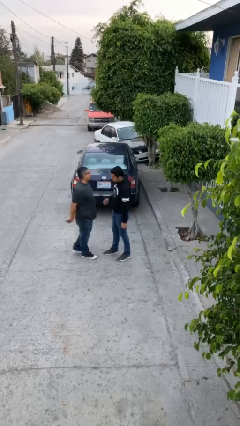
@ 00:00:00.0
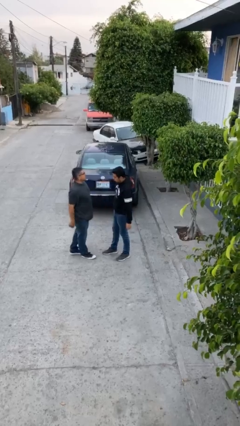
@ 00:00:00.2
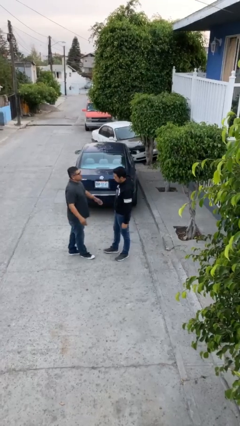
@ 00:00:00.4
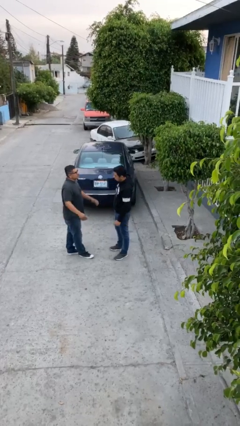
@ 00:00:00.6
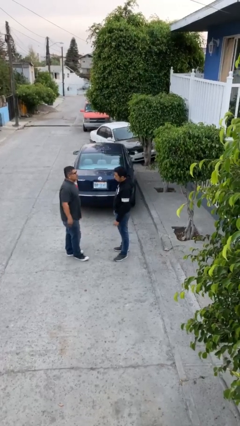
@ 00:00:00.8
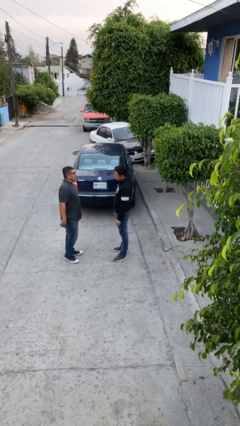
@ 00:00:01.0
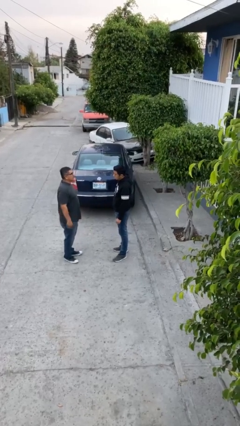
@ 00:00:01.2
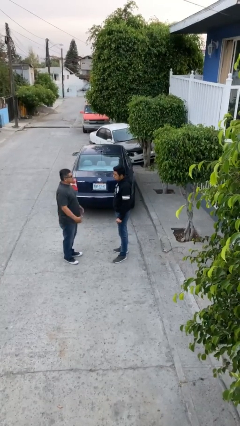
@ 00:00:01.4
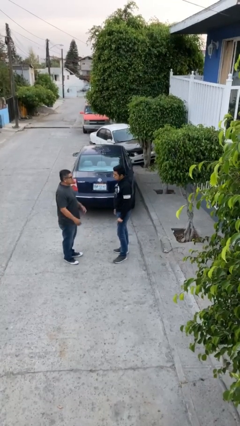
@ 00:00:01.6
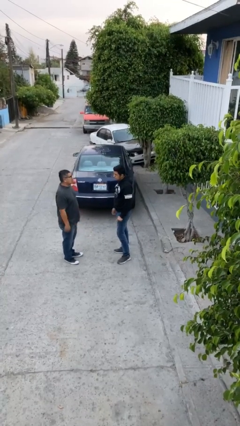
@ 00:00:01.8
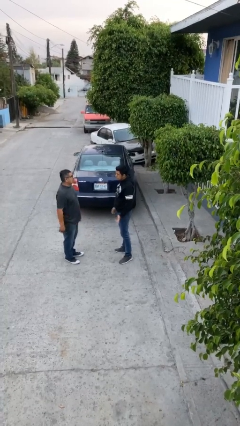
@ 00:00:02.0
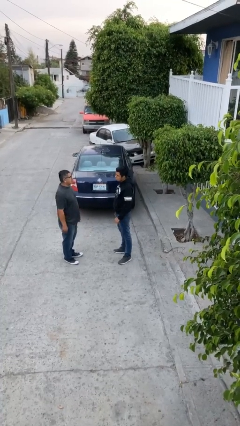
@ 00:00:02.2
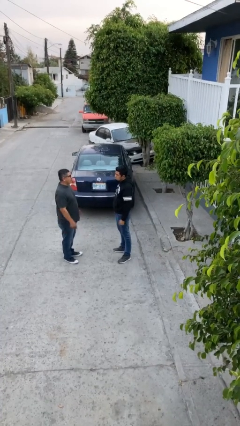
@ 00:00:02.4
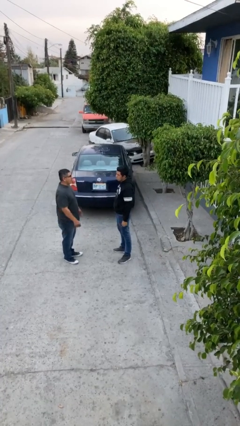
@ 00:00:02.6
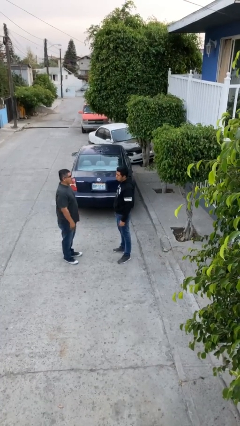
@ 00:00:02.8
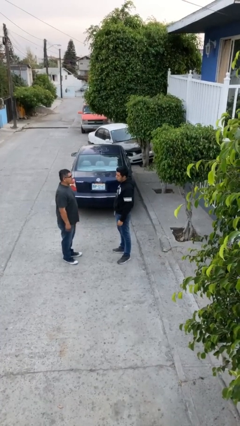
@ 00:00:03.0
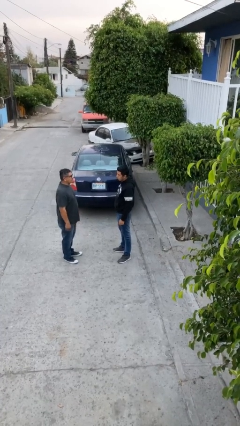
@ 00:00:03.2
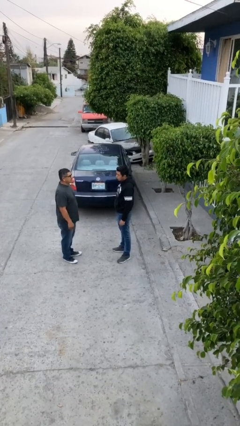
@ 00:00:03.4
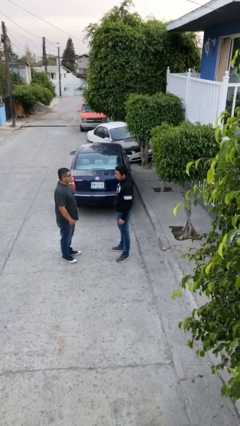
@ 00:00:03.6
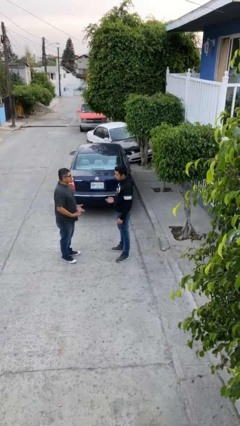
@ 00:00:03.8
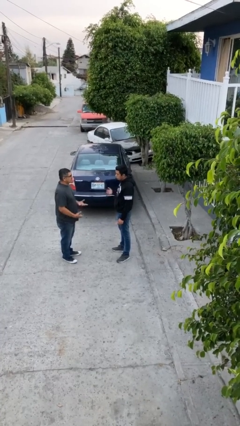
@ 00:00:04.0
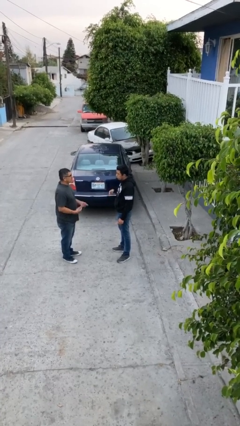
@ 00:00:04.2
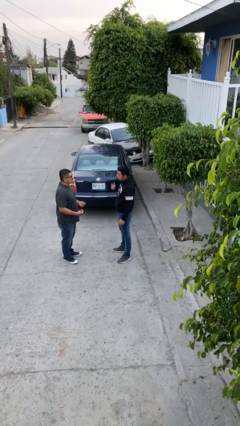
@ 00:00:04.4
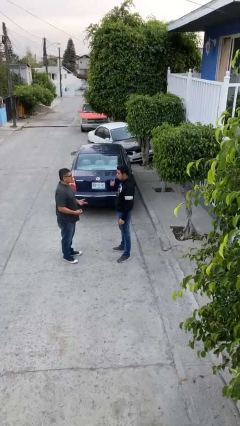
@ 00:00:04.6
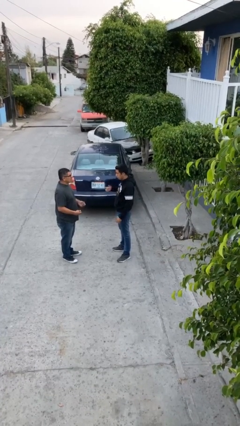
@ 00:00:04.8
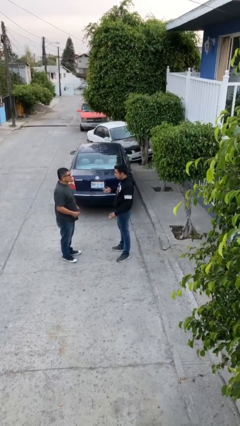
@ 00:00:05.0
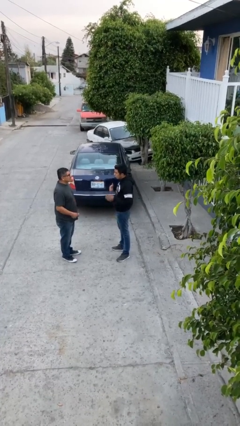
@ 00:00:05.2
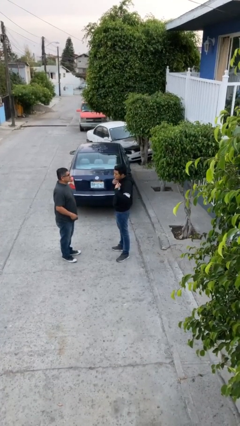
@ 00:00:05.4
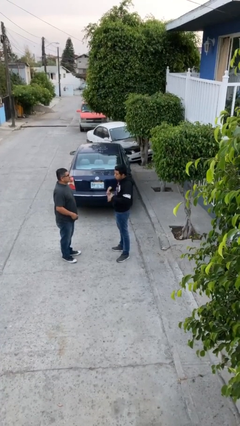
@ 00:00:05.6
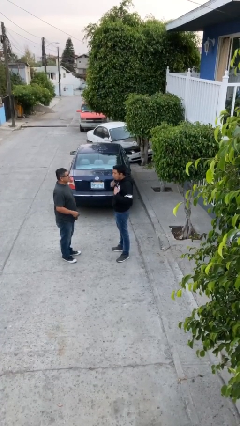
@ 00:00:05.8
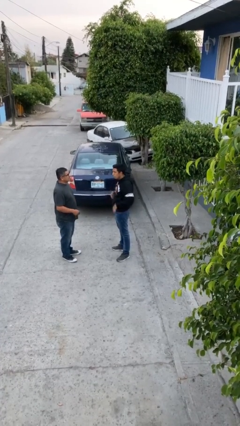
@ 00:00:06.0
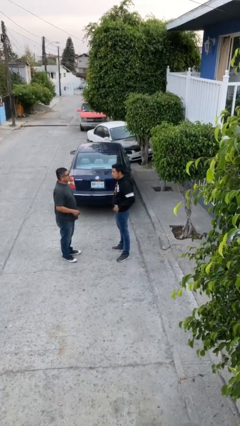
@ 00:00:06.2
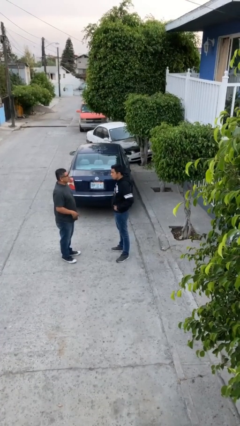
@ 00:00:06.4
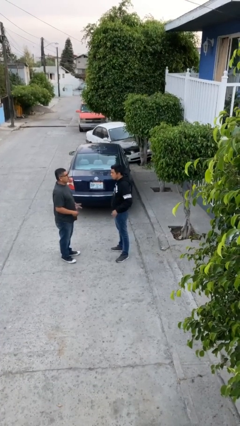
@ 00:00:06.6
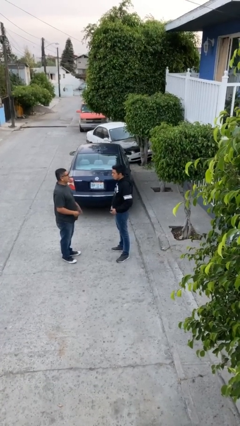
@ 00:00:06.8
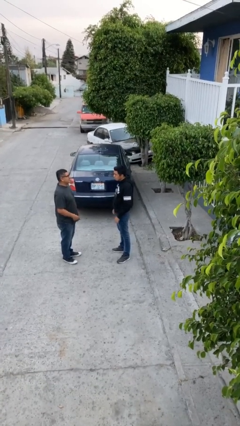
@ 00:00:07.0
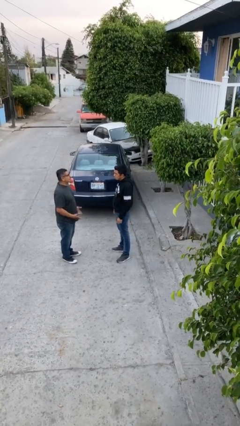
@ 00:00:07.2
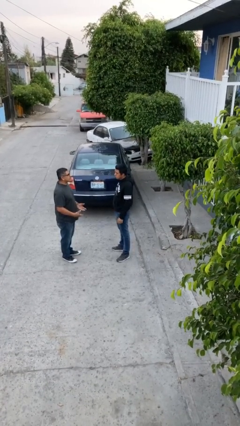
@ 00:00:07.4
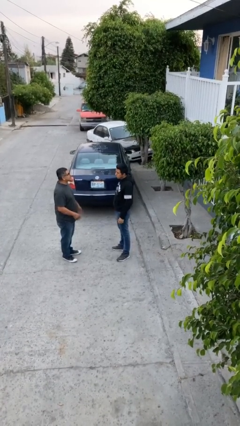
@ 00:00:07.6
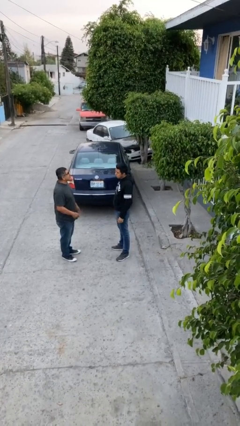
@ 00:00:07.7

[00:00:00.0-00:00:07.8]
person talks to person

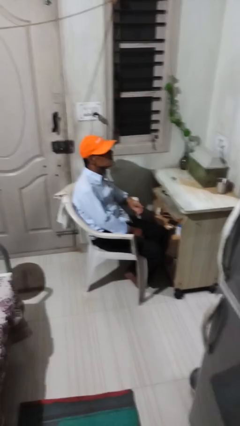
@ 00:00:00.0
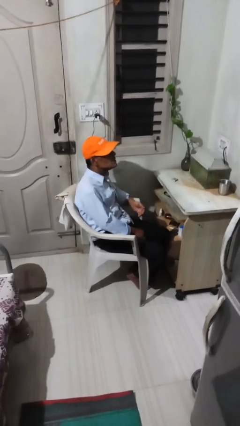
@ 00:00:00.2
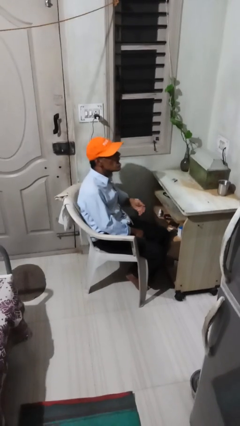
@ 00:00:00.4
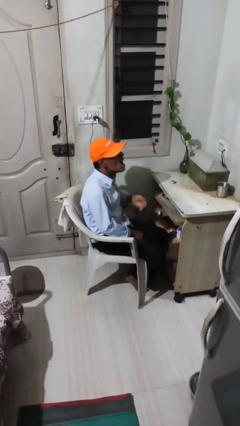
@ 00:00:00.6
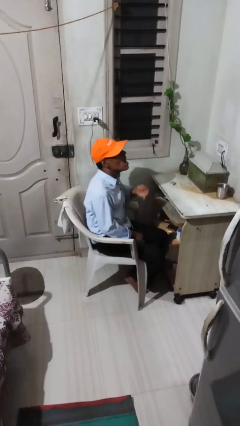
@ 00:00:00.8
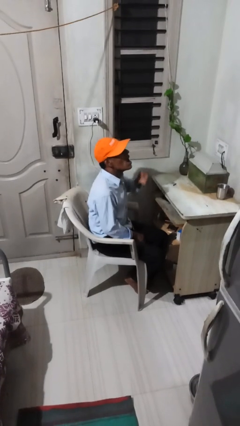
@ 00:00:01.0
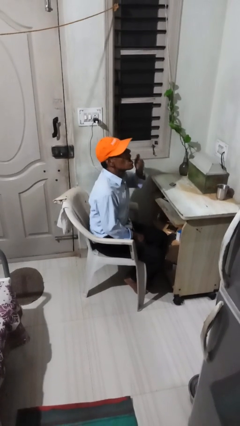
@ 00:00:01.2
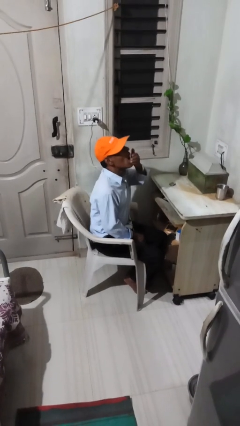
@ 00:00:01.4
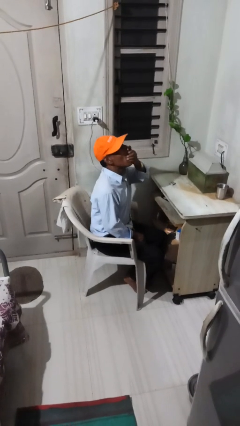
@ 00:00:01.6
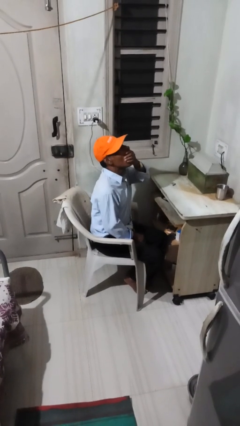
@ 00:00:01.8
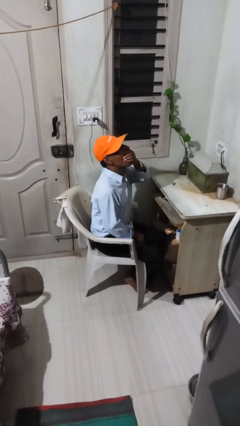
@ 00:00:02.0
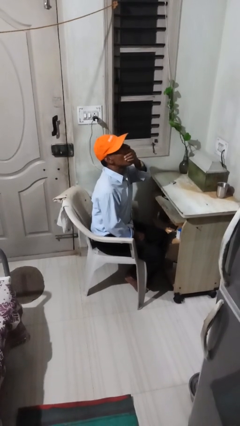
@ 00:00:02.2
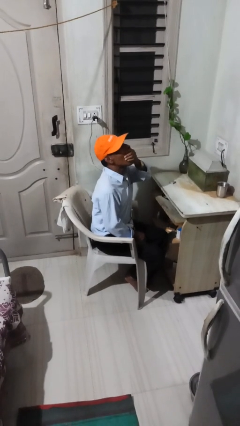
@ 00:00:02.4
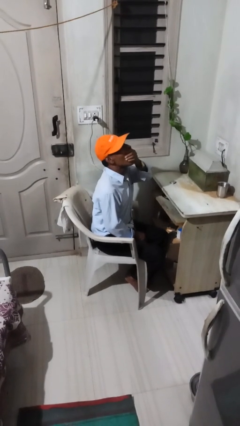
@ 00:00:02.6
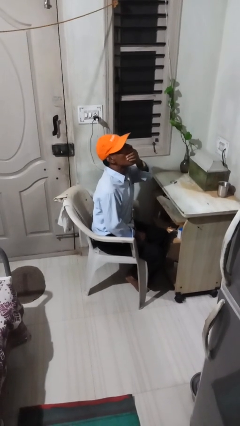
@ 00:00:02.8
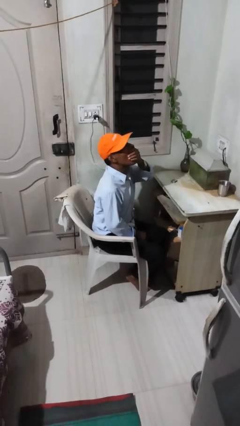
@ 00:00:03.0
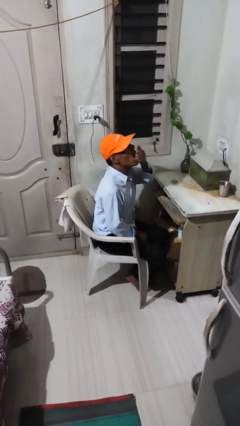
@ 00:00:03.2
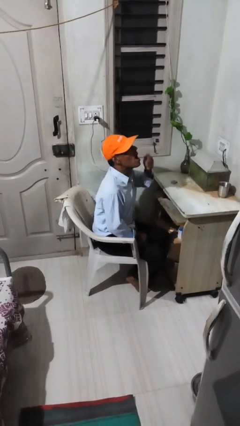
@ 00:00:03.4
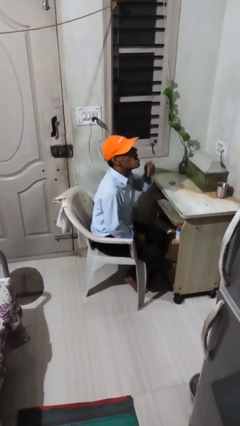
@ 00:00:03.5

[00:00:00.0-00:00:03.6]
person yawns

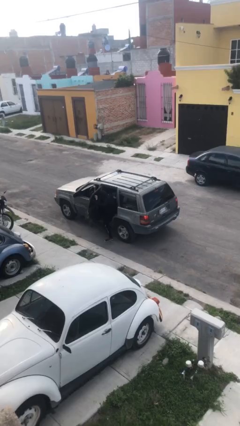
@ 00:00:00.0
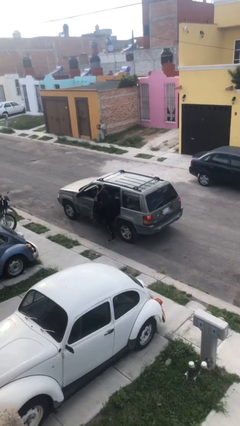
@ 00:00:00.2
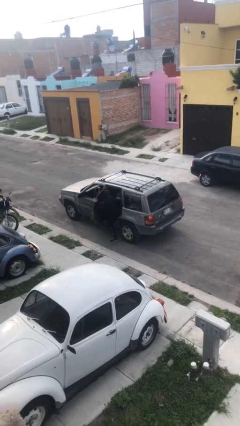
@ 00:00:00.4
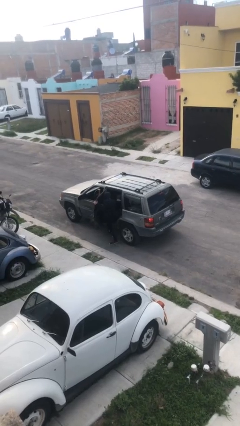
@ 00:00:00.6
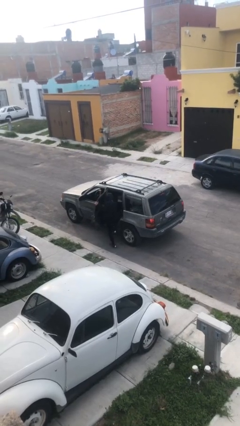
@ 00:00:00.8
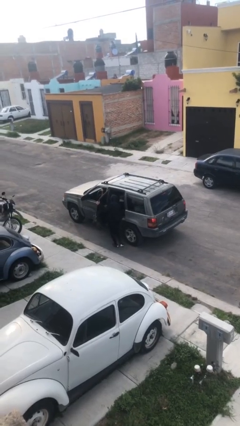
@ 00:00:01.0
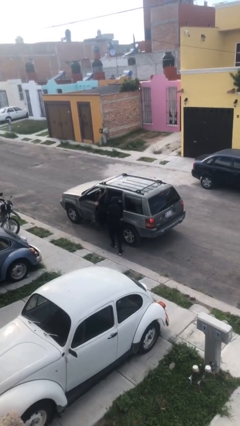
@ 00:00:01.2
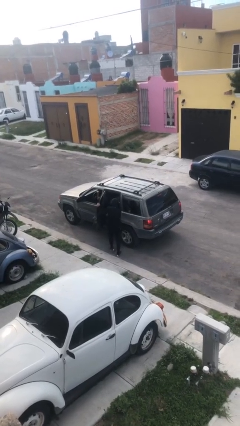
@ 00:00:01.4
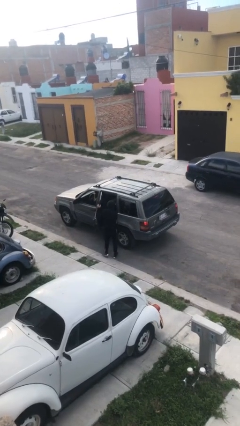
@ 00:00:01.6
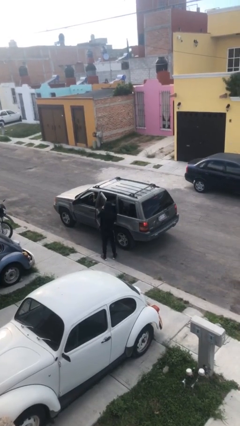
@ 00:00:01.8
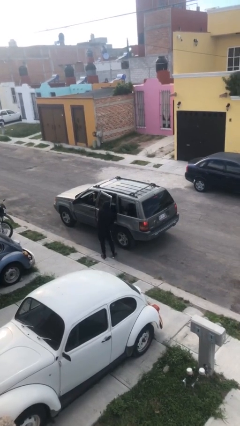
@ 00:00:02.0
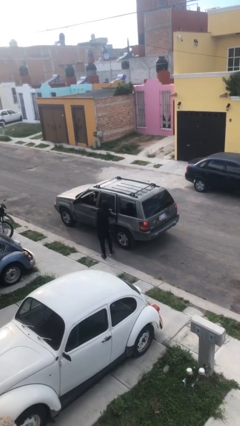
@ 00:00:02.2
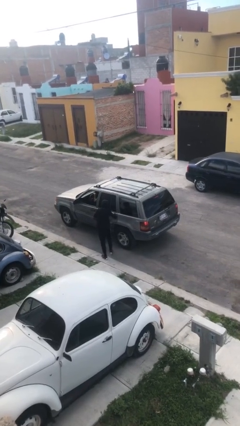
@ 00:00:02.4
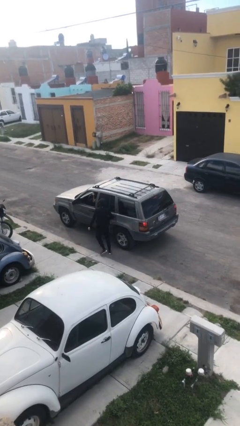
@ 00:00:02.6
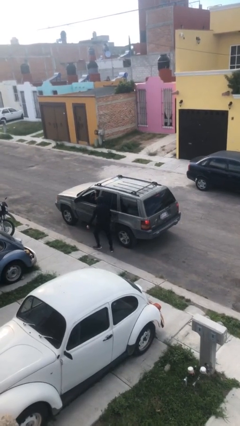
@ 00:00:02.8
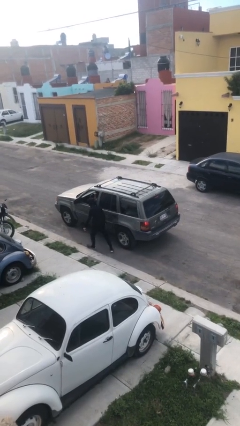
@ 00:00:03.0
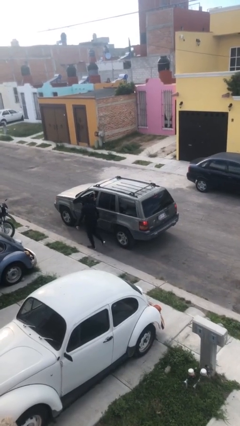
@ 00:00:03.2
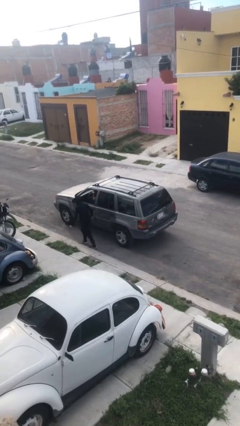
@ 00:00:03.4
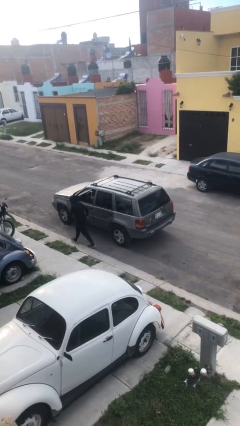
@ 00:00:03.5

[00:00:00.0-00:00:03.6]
car drops off person

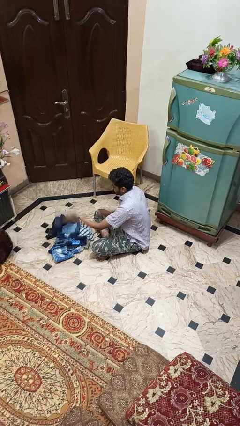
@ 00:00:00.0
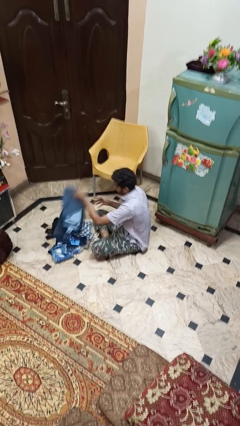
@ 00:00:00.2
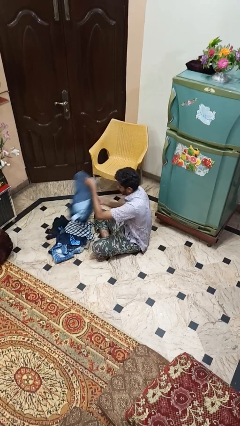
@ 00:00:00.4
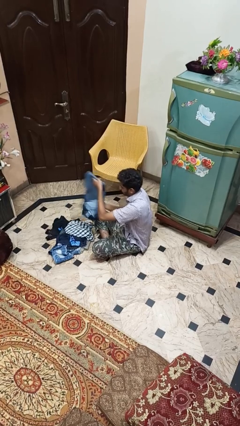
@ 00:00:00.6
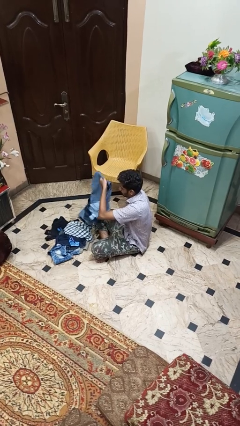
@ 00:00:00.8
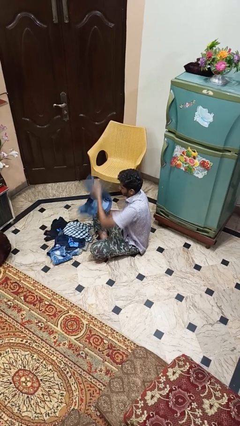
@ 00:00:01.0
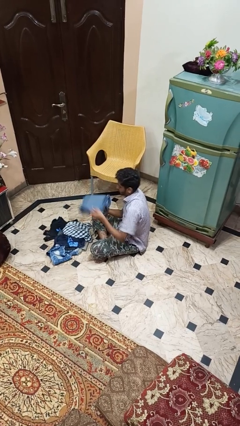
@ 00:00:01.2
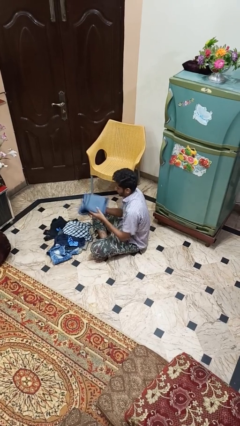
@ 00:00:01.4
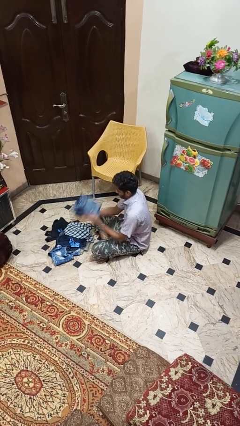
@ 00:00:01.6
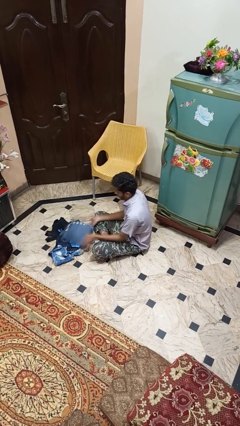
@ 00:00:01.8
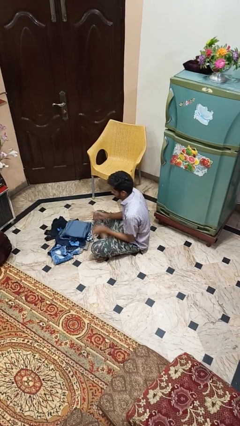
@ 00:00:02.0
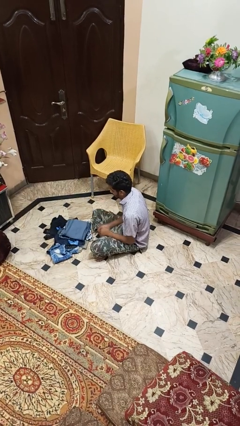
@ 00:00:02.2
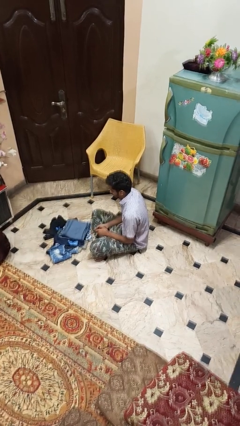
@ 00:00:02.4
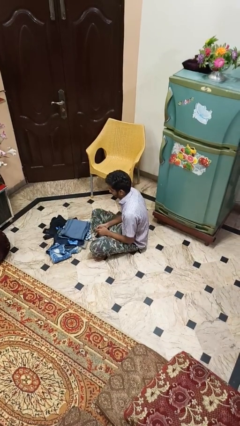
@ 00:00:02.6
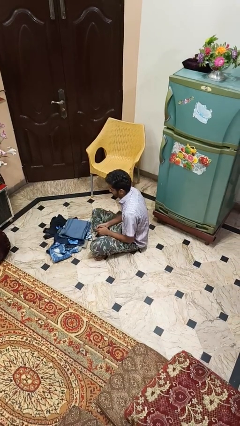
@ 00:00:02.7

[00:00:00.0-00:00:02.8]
person folds pants
